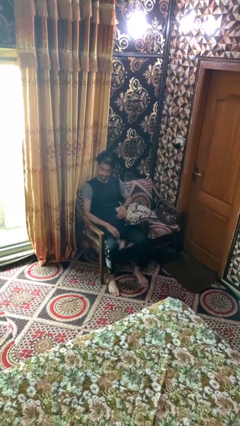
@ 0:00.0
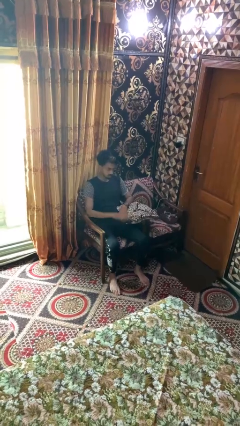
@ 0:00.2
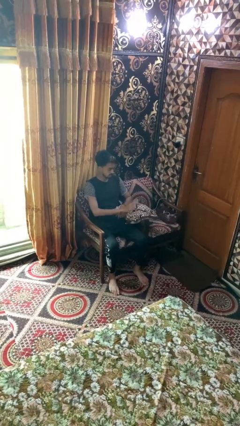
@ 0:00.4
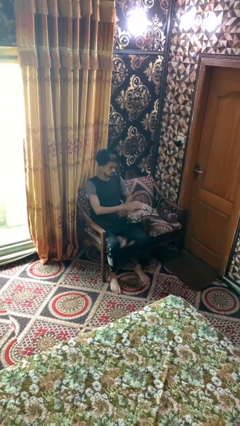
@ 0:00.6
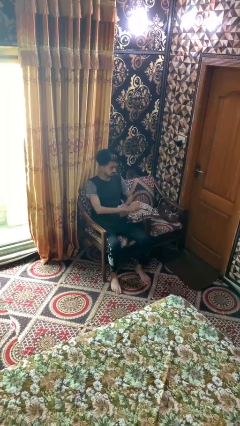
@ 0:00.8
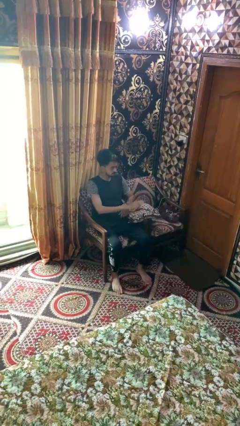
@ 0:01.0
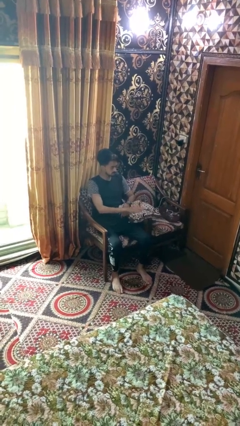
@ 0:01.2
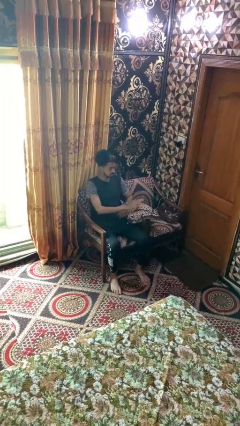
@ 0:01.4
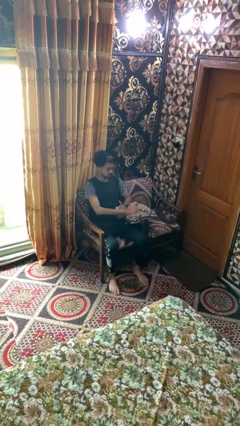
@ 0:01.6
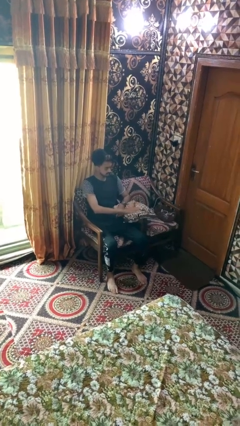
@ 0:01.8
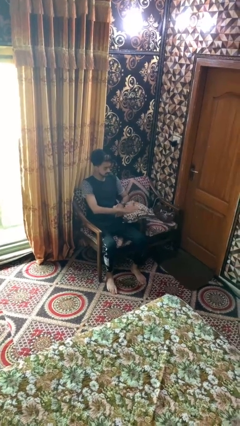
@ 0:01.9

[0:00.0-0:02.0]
person taps object with finger

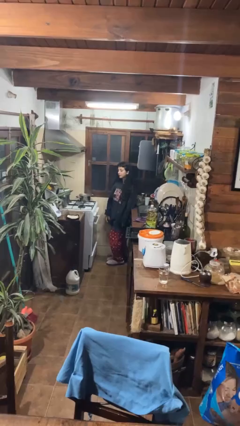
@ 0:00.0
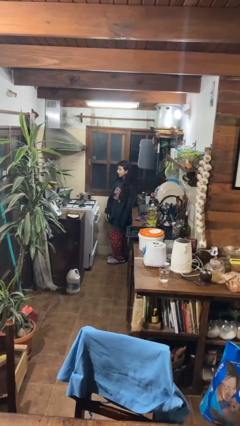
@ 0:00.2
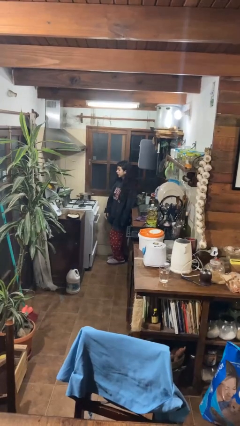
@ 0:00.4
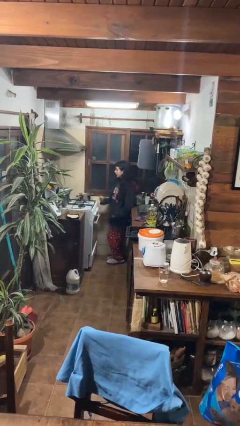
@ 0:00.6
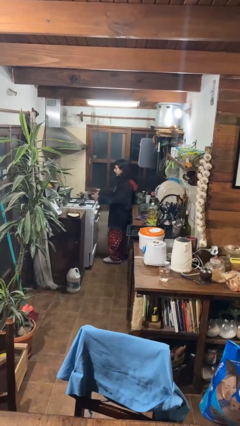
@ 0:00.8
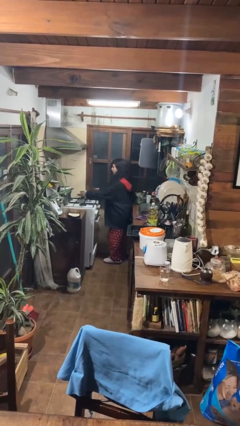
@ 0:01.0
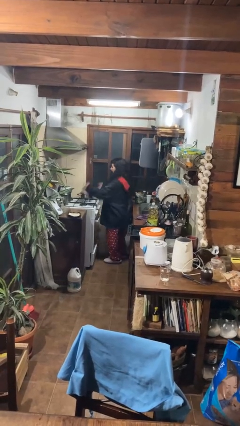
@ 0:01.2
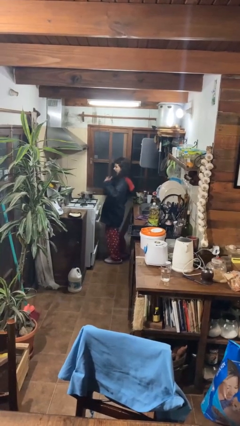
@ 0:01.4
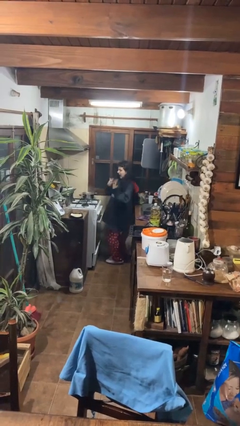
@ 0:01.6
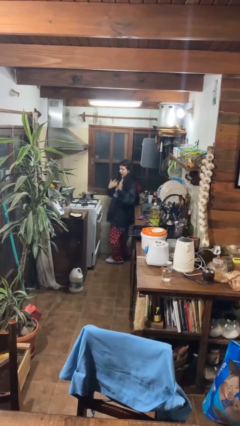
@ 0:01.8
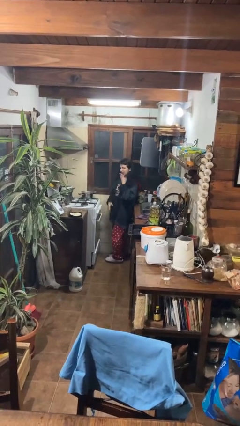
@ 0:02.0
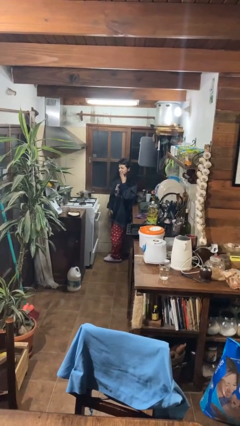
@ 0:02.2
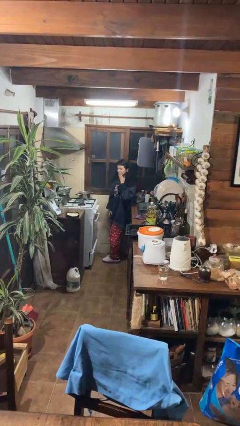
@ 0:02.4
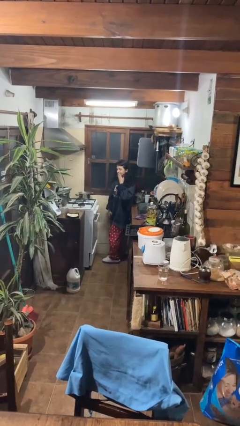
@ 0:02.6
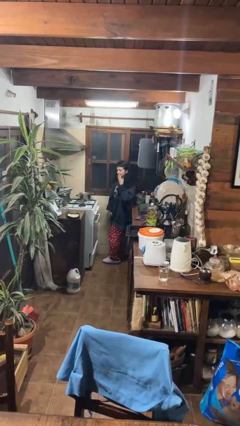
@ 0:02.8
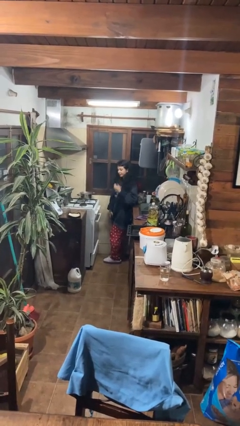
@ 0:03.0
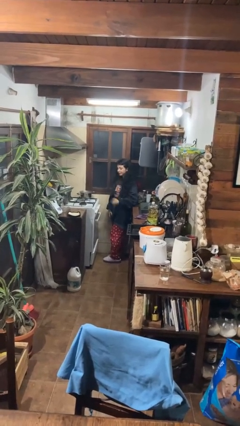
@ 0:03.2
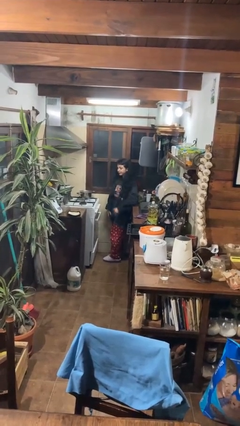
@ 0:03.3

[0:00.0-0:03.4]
person burns hand

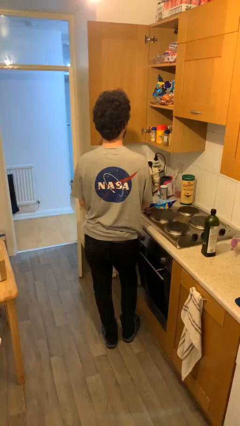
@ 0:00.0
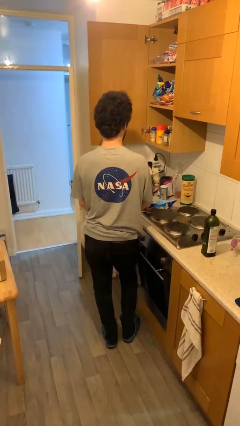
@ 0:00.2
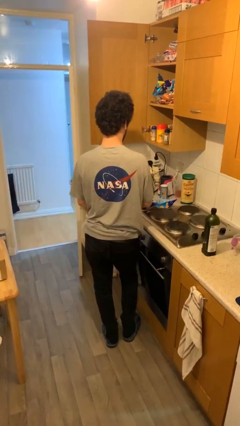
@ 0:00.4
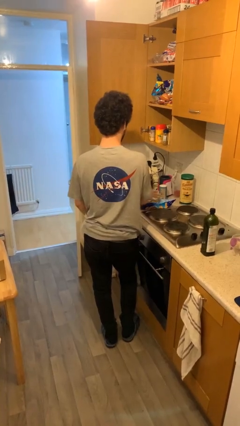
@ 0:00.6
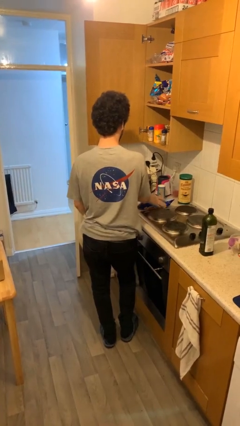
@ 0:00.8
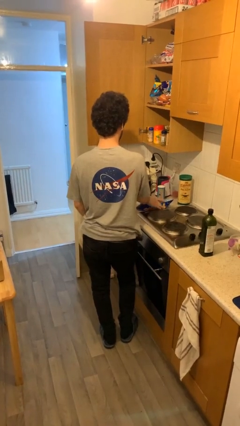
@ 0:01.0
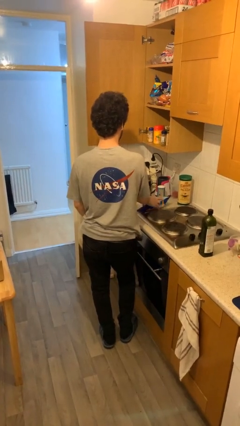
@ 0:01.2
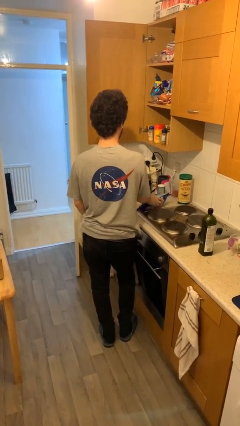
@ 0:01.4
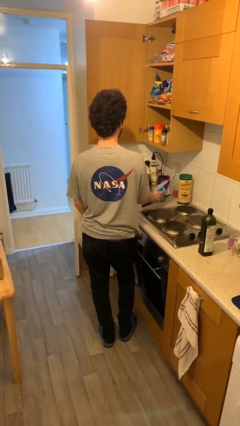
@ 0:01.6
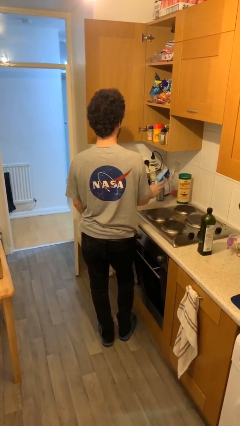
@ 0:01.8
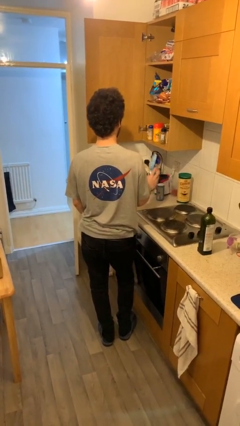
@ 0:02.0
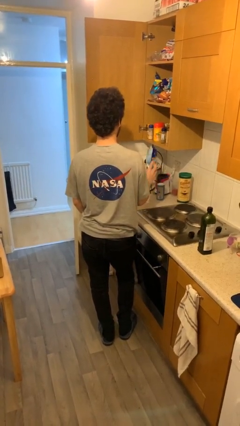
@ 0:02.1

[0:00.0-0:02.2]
person picks up object from table

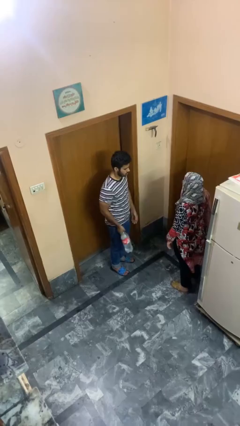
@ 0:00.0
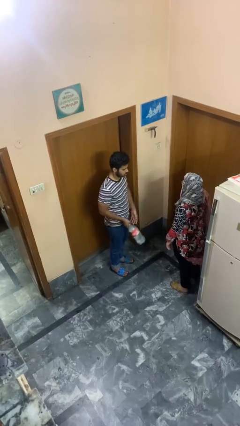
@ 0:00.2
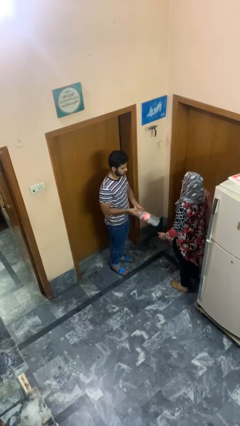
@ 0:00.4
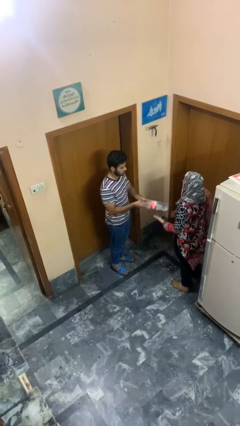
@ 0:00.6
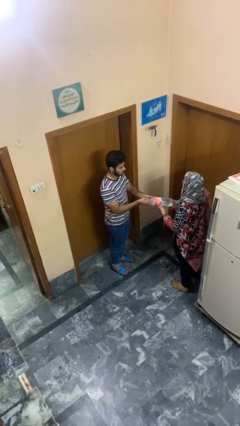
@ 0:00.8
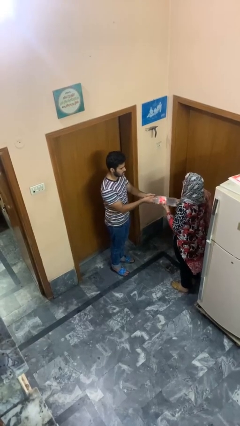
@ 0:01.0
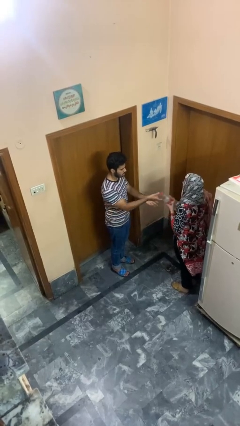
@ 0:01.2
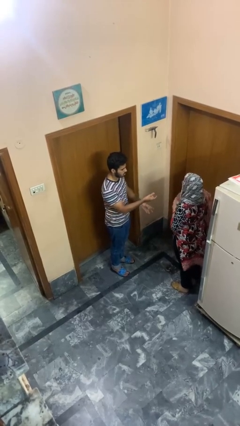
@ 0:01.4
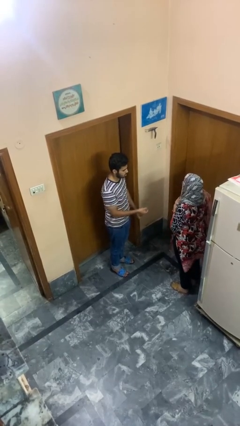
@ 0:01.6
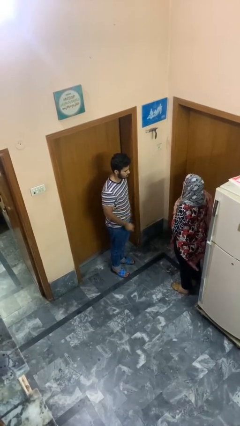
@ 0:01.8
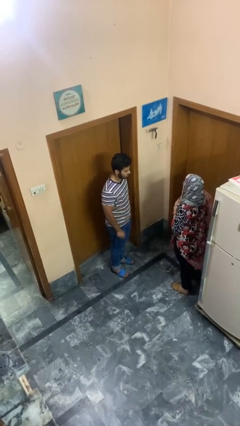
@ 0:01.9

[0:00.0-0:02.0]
person transfers object to person

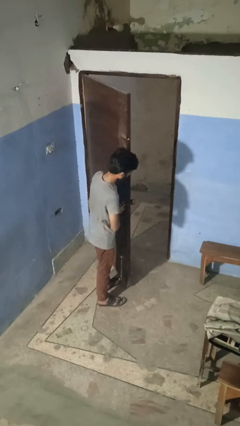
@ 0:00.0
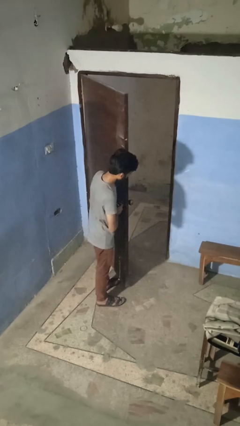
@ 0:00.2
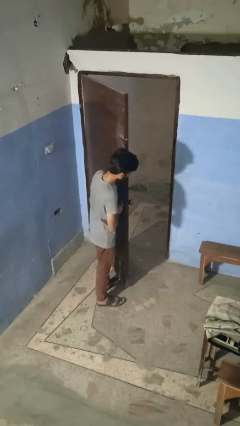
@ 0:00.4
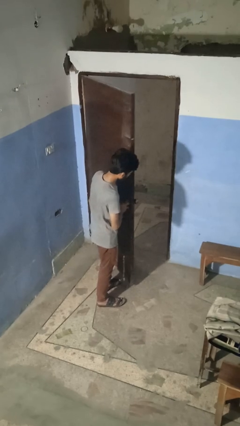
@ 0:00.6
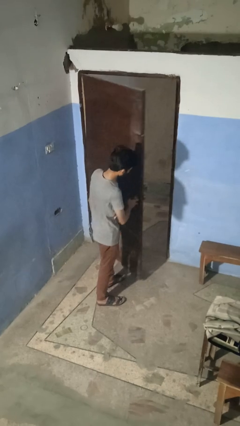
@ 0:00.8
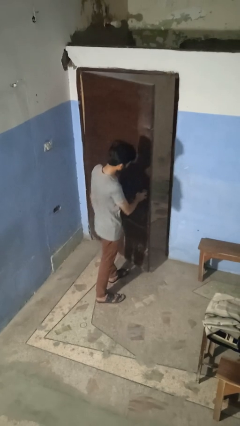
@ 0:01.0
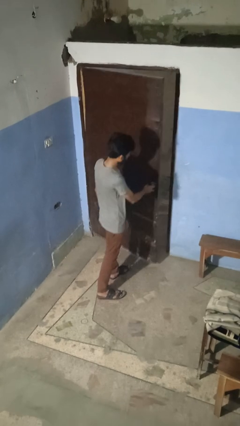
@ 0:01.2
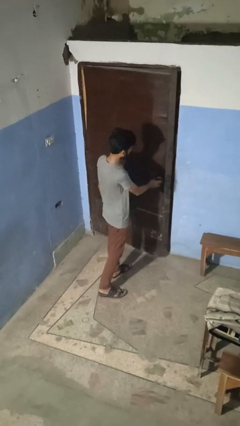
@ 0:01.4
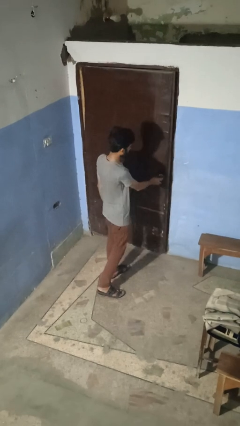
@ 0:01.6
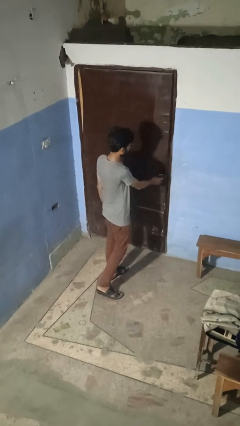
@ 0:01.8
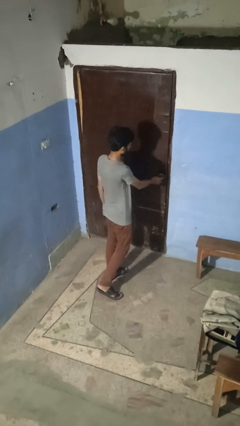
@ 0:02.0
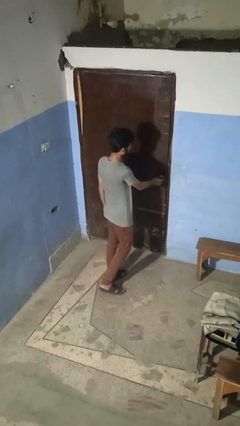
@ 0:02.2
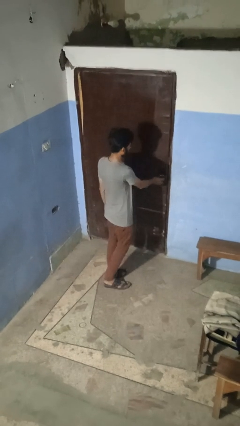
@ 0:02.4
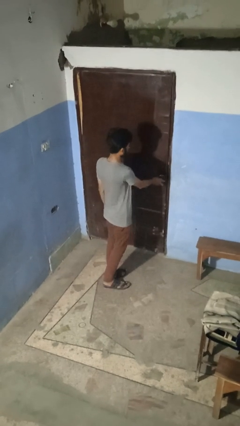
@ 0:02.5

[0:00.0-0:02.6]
person closes facility door

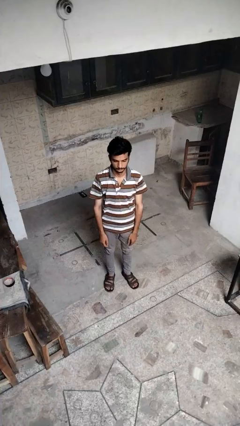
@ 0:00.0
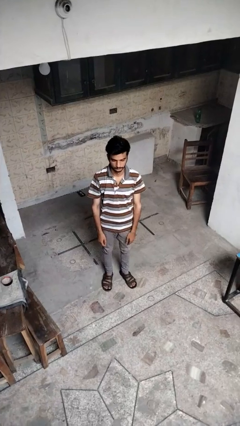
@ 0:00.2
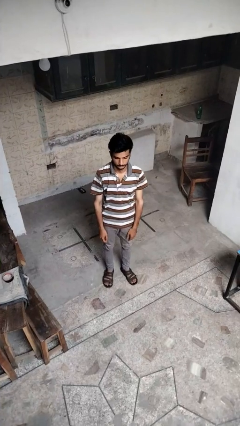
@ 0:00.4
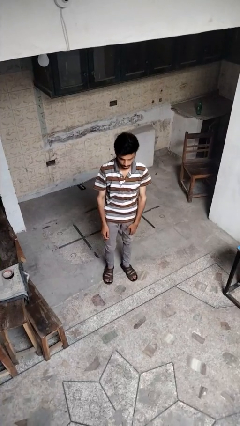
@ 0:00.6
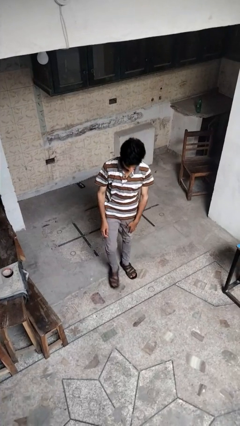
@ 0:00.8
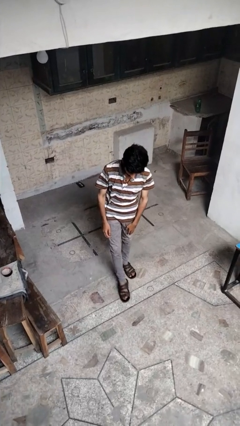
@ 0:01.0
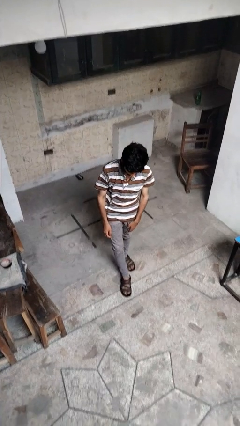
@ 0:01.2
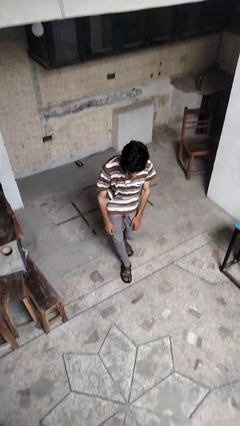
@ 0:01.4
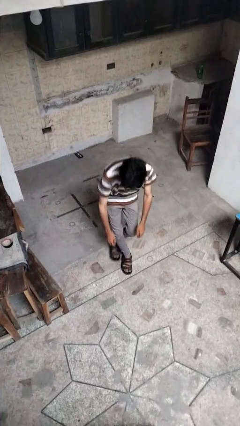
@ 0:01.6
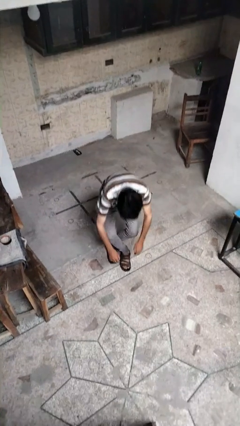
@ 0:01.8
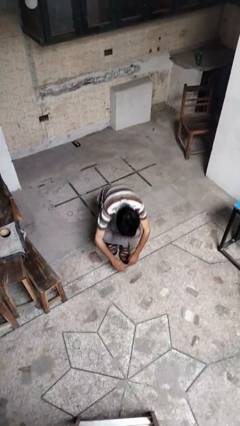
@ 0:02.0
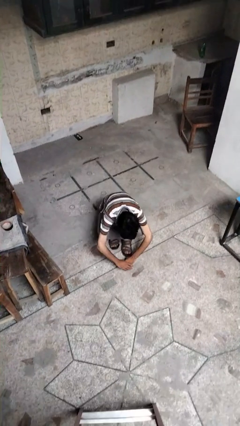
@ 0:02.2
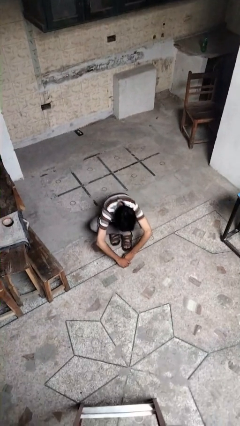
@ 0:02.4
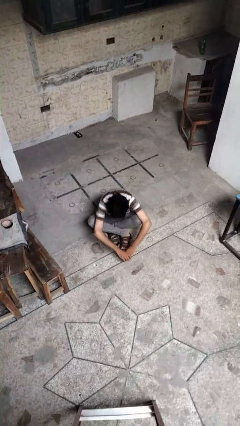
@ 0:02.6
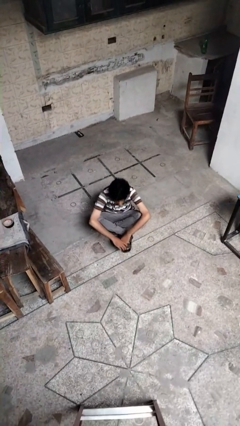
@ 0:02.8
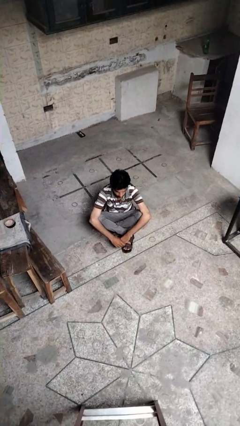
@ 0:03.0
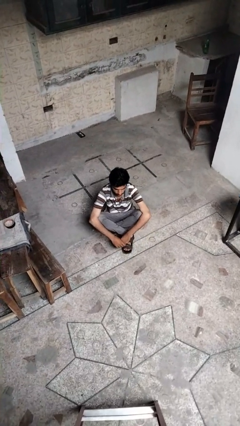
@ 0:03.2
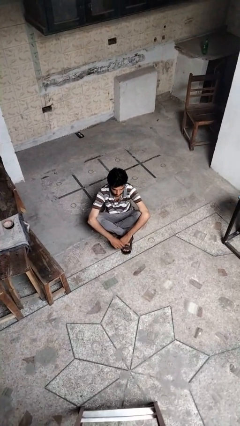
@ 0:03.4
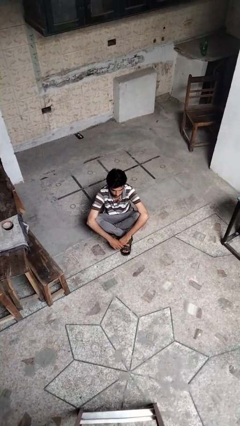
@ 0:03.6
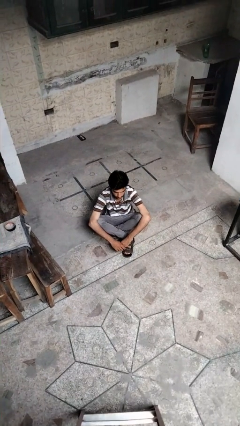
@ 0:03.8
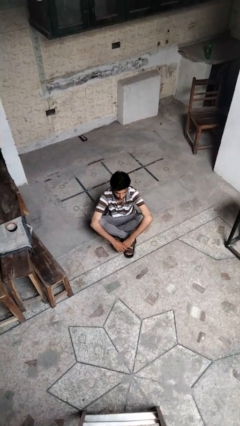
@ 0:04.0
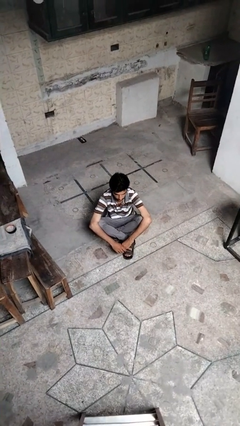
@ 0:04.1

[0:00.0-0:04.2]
person sits crisscross

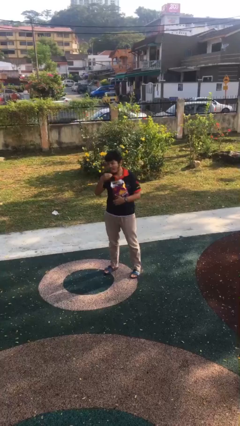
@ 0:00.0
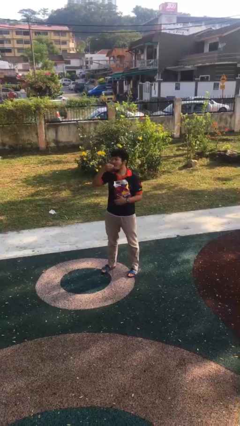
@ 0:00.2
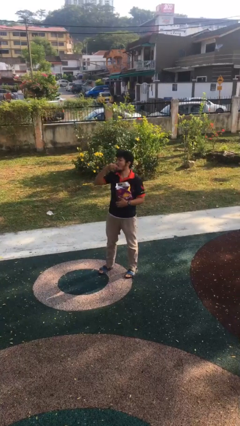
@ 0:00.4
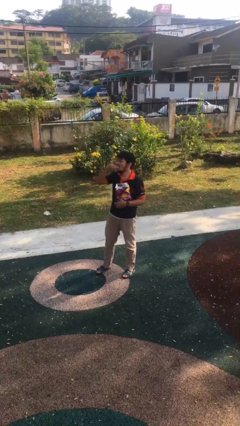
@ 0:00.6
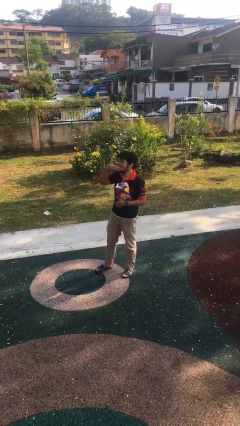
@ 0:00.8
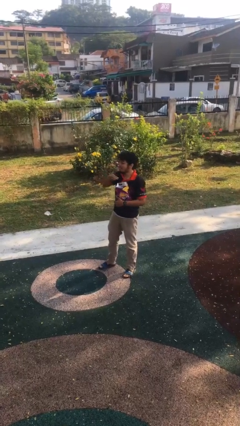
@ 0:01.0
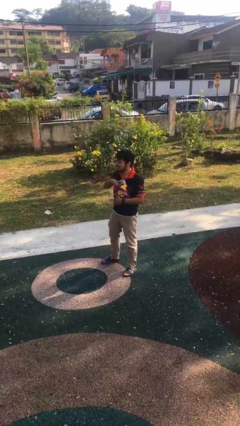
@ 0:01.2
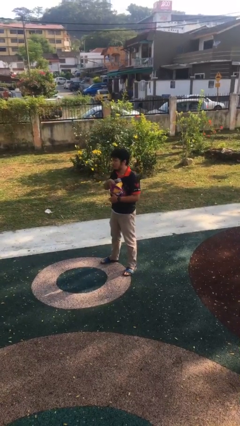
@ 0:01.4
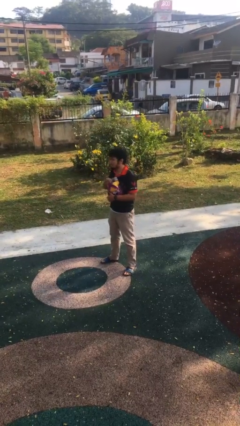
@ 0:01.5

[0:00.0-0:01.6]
person eats snack from bag
